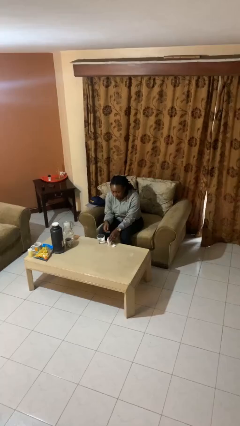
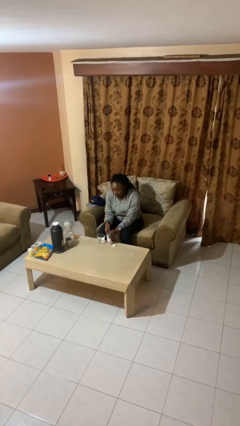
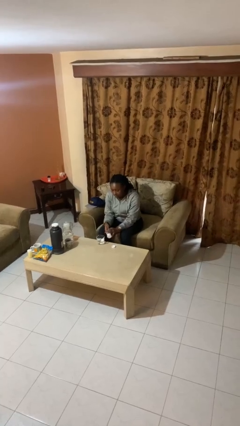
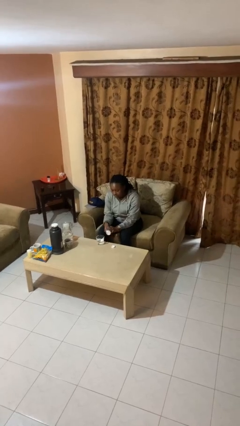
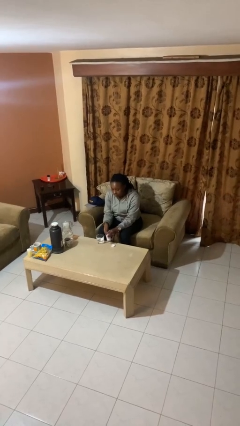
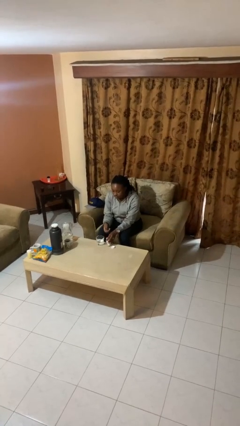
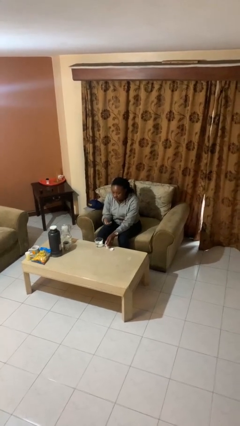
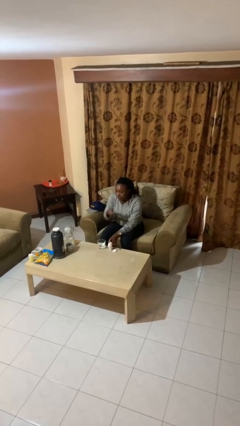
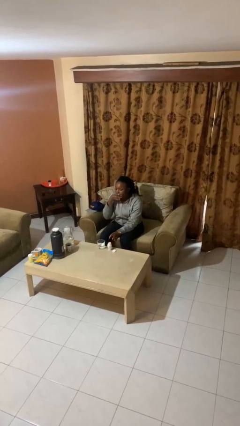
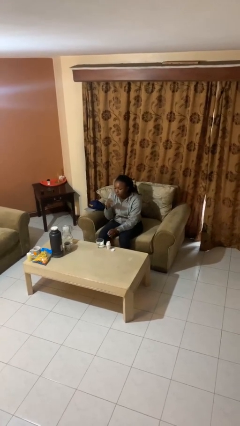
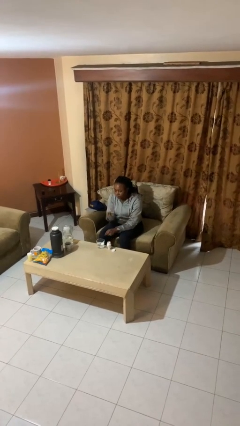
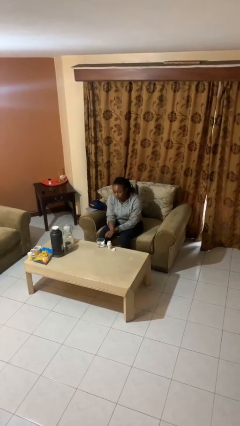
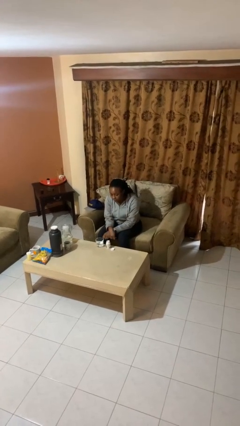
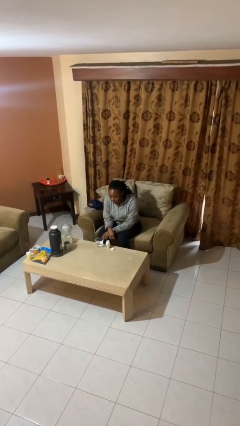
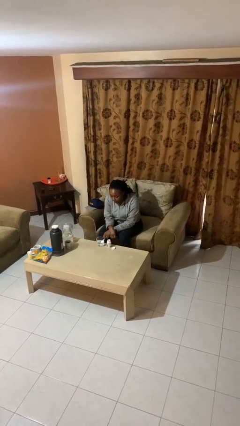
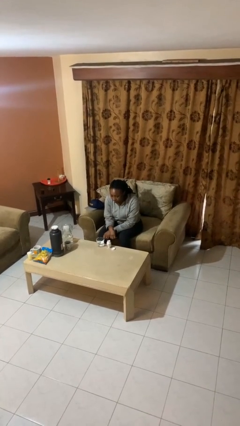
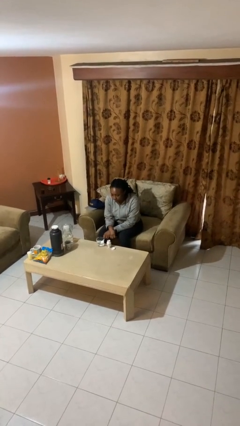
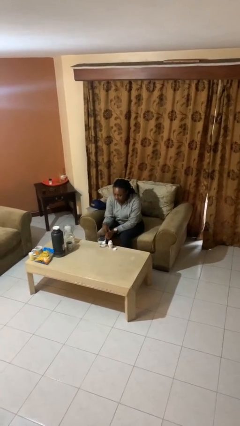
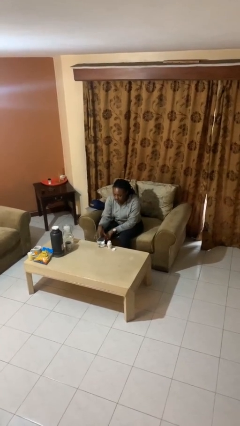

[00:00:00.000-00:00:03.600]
person takes medicine pills

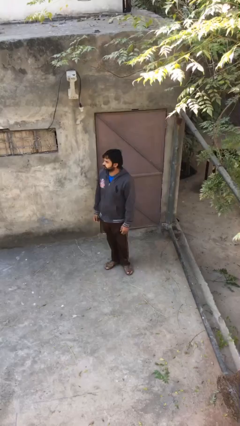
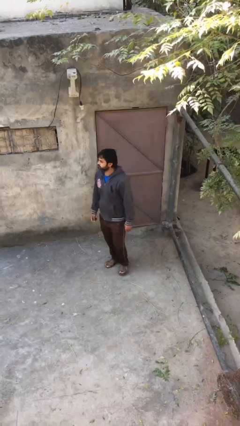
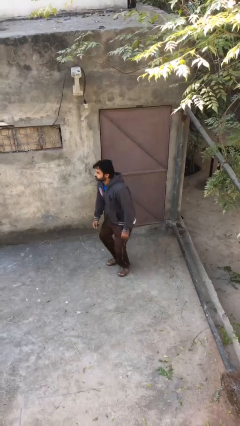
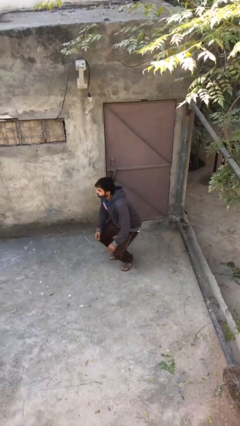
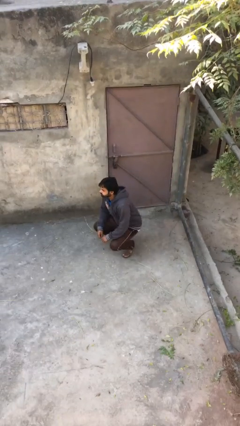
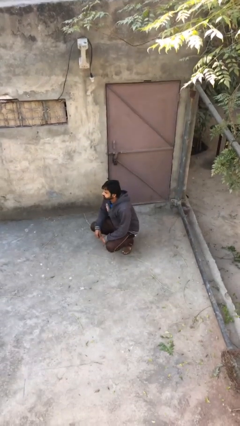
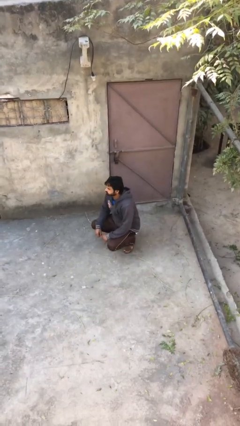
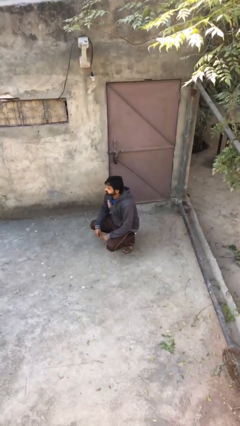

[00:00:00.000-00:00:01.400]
person sits down

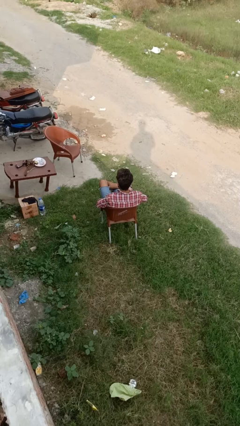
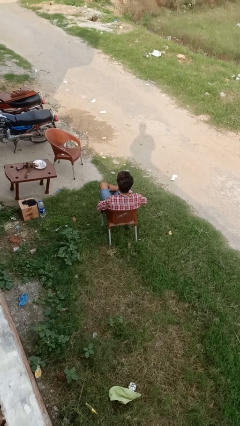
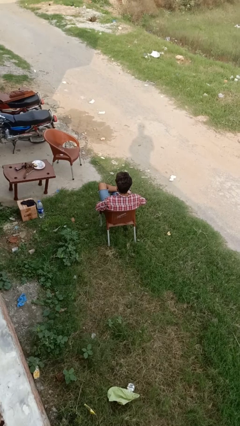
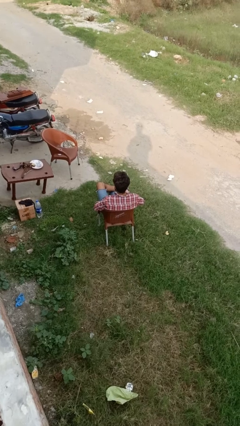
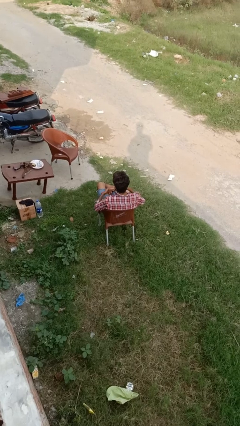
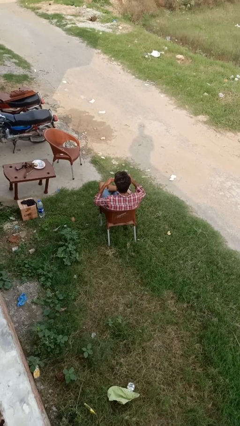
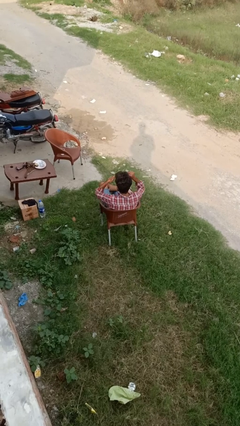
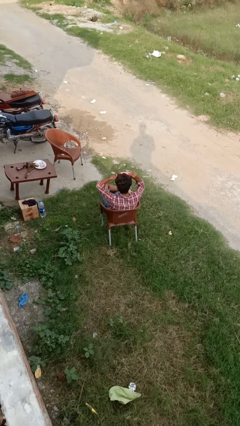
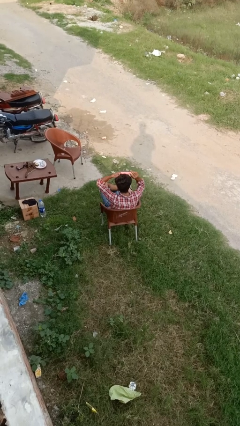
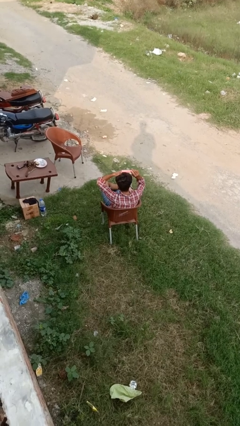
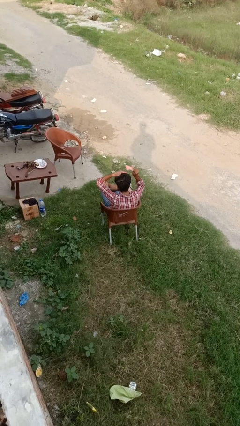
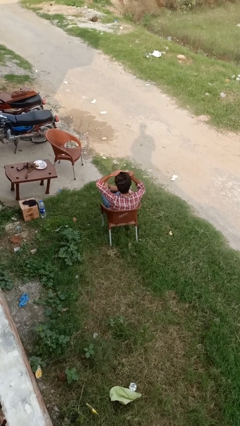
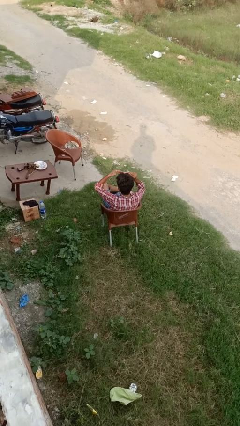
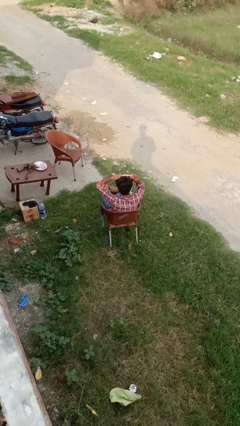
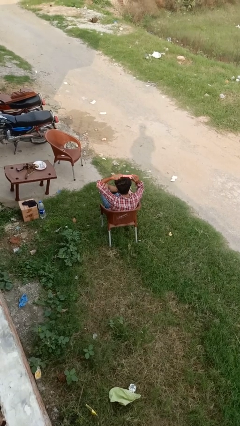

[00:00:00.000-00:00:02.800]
person brushes hair

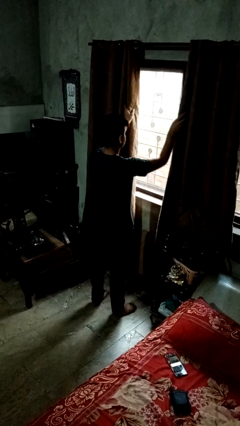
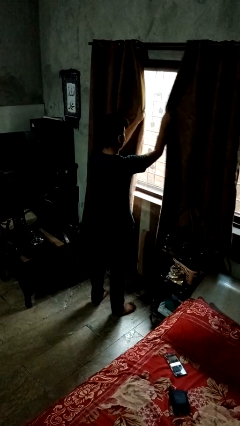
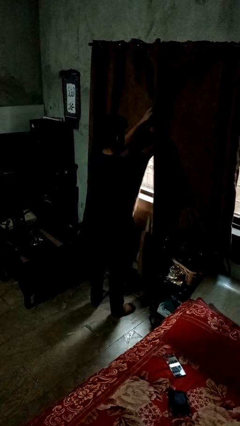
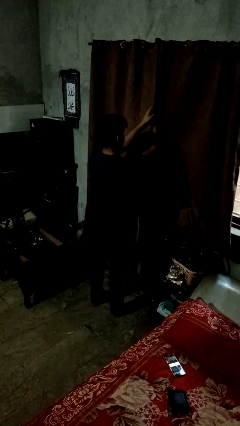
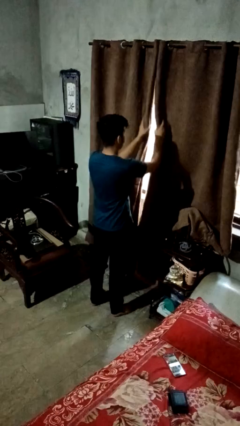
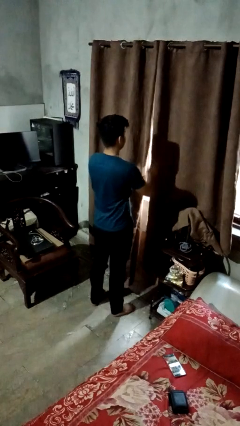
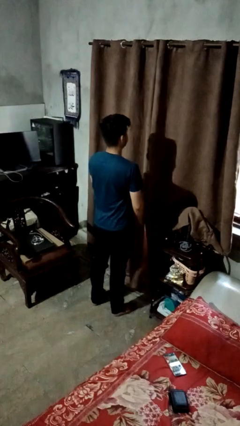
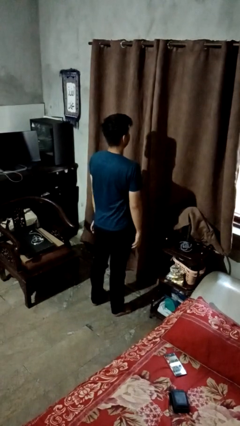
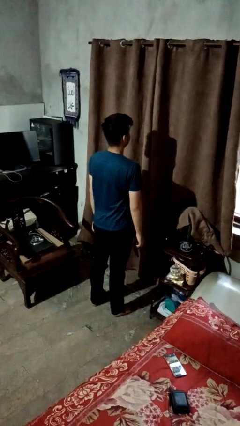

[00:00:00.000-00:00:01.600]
person closes curtains

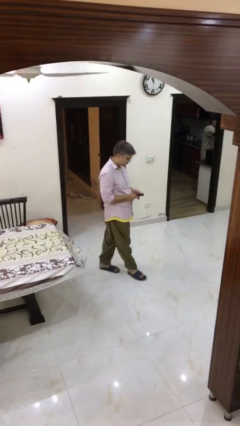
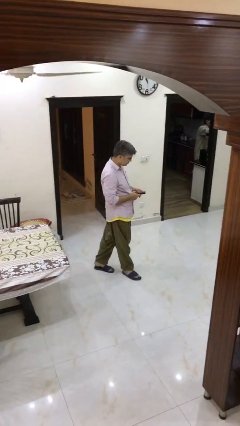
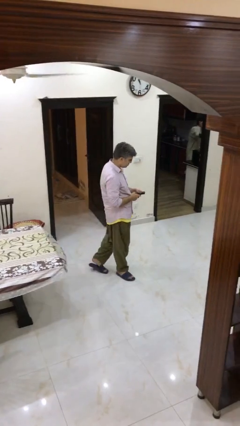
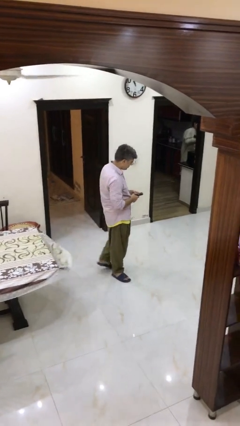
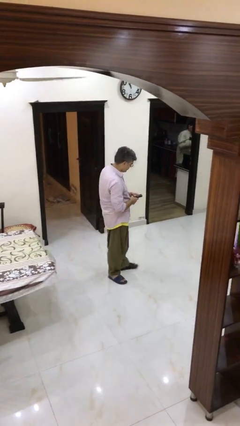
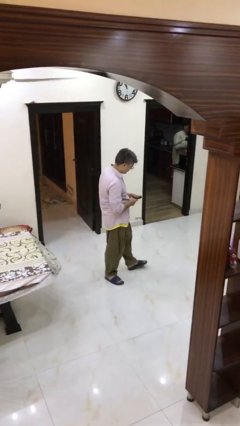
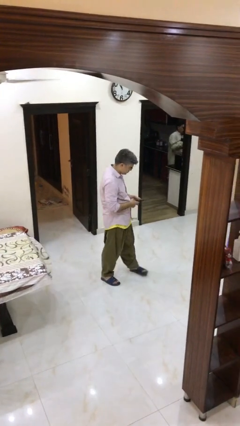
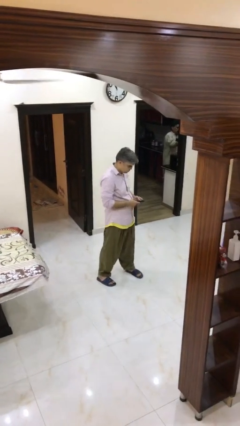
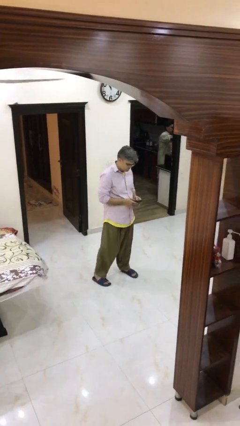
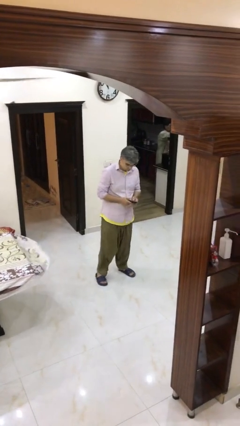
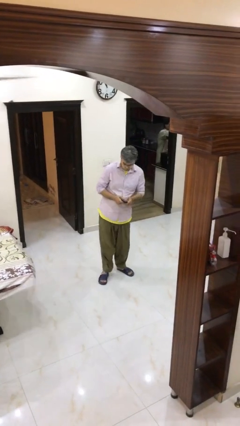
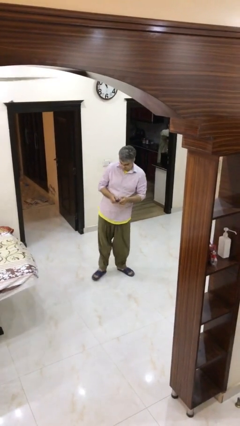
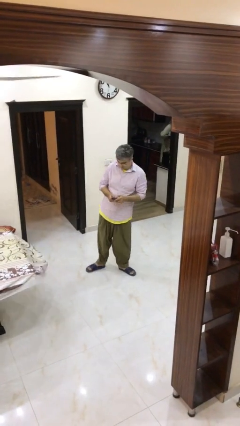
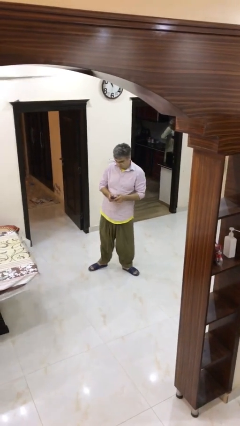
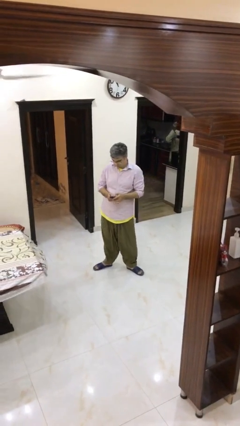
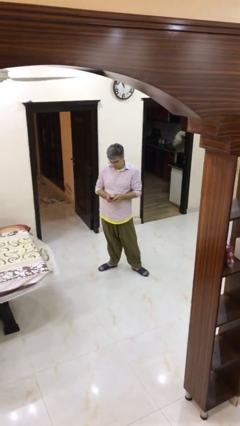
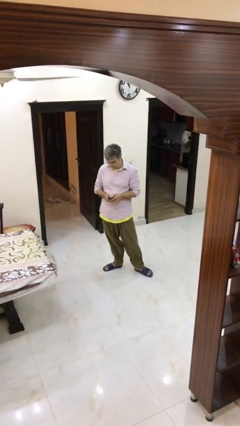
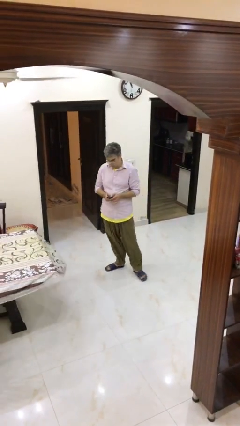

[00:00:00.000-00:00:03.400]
person texts on phone

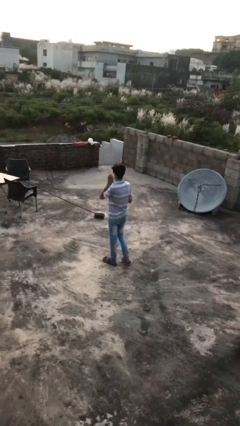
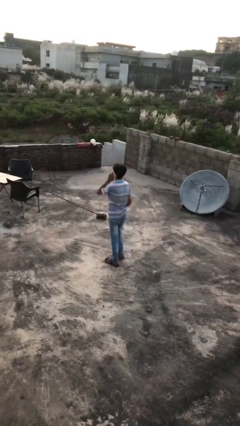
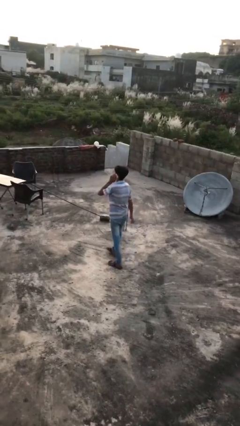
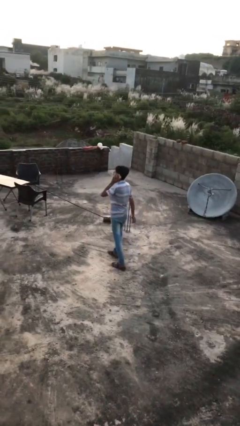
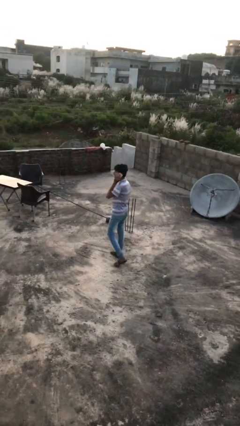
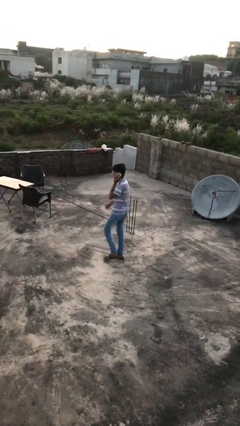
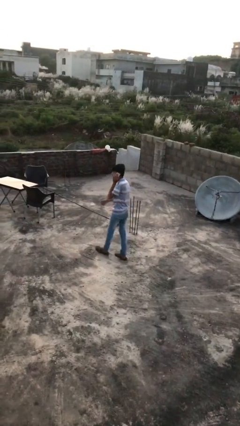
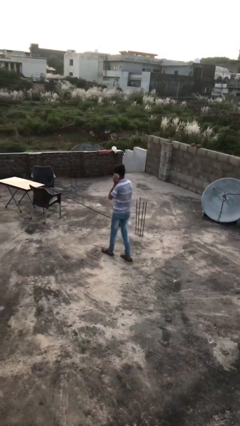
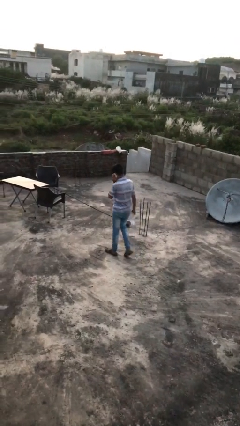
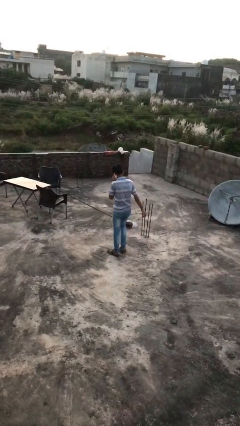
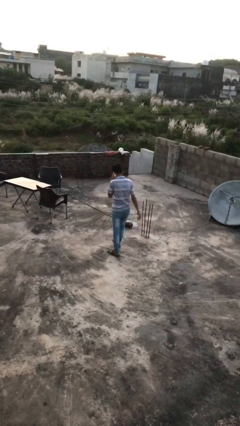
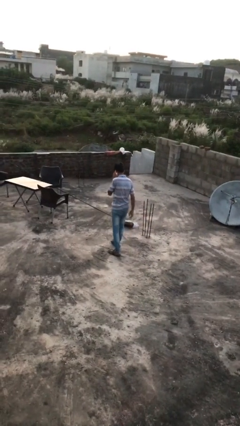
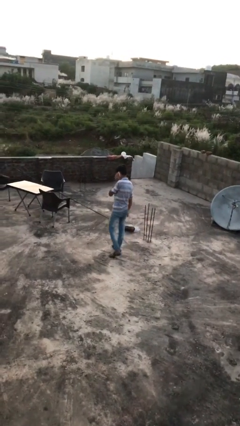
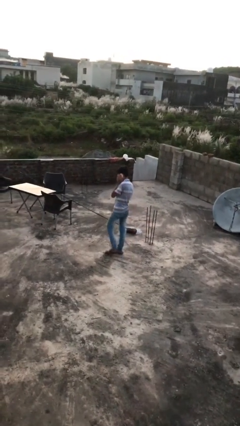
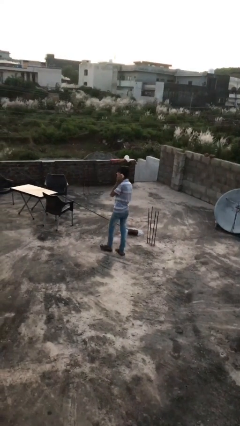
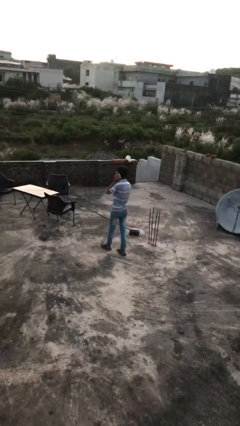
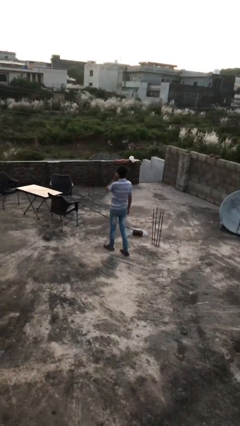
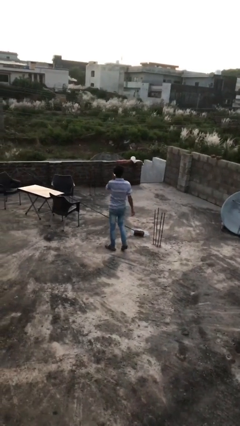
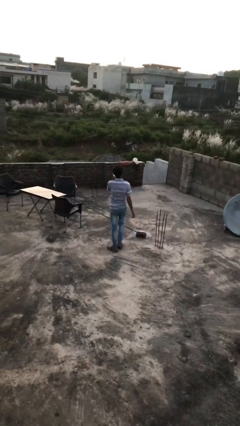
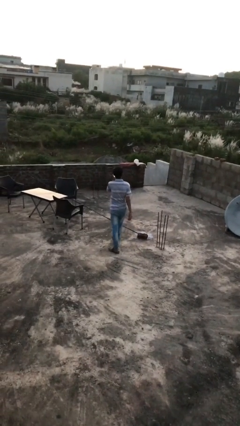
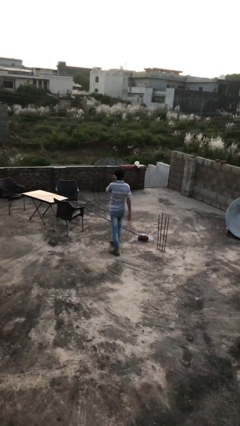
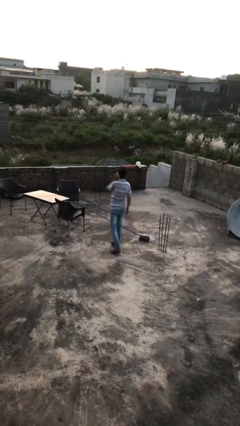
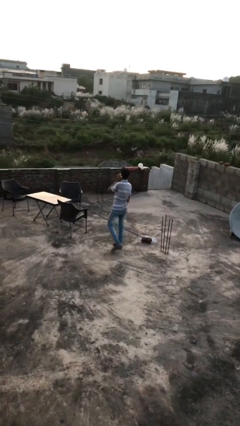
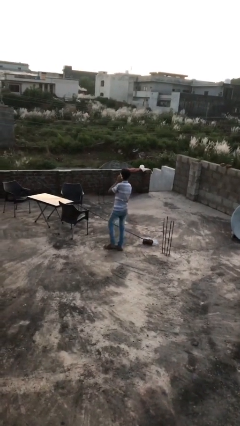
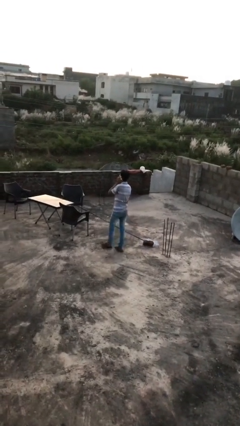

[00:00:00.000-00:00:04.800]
person talks on phone
